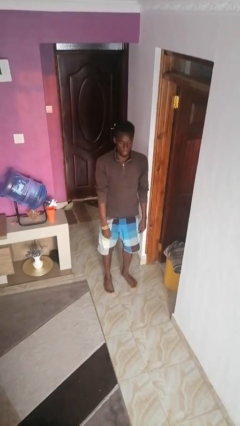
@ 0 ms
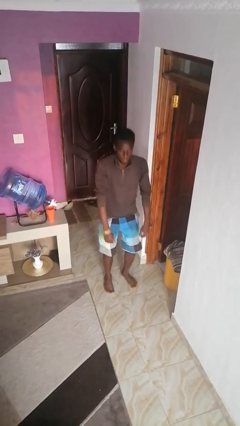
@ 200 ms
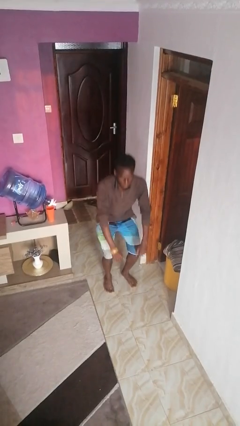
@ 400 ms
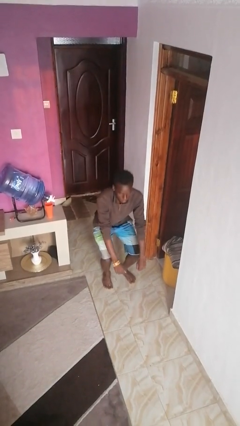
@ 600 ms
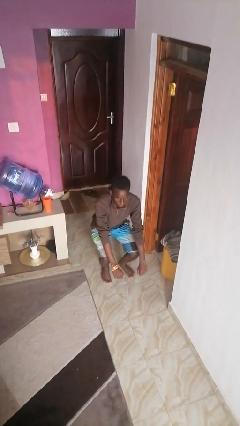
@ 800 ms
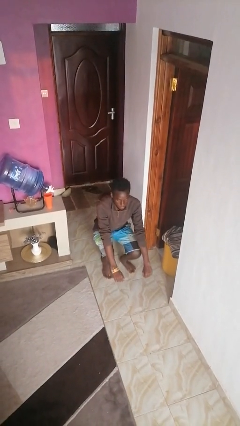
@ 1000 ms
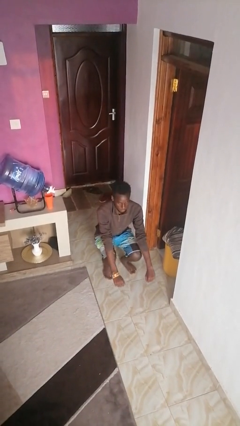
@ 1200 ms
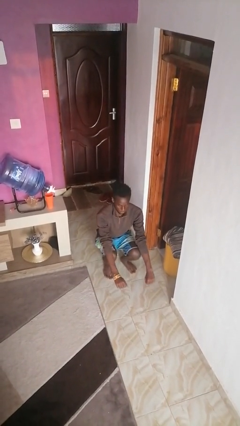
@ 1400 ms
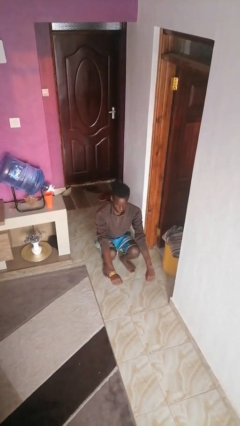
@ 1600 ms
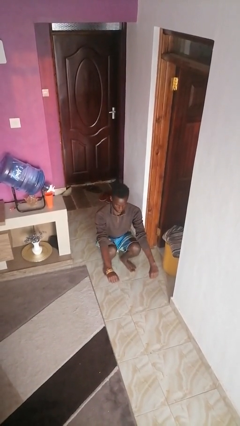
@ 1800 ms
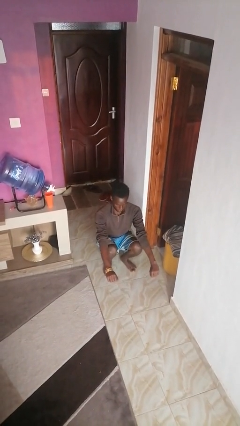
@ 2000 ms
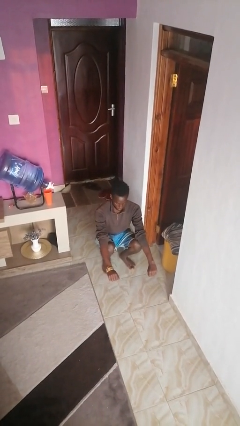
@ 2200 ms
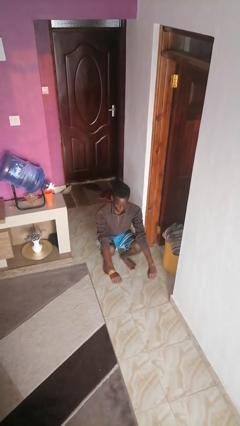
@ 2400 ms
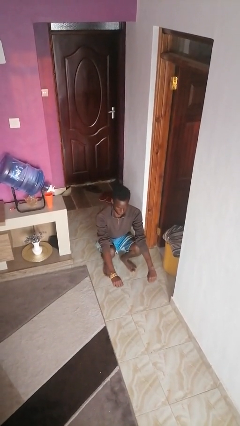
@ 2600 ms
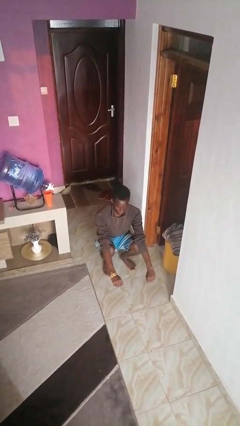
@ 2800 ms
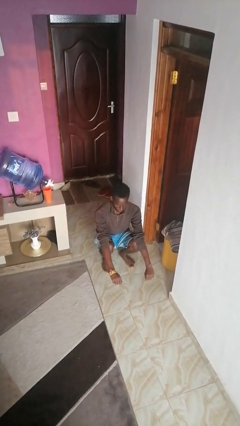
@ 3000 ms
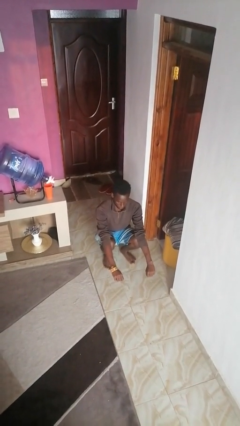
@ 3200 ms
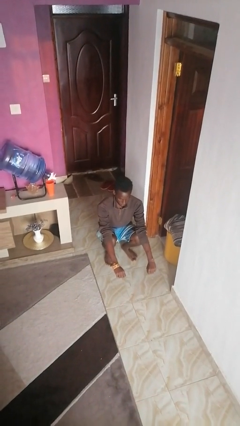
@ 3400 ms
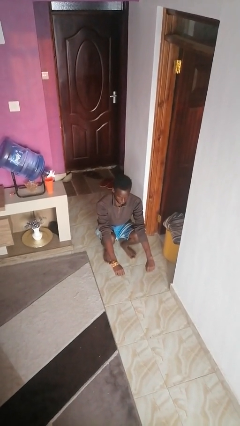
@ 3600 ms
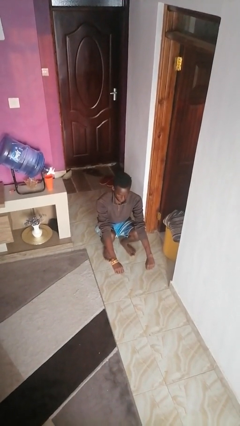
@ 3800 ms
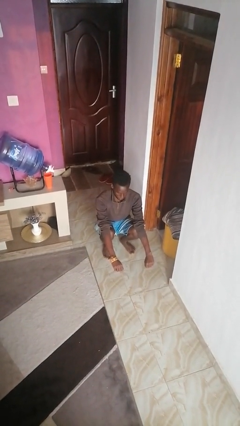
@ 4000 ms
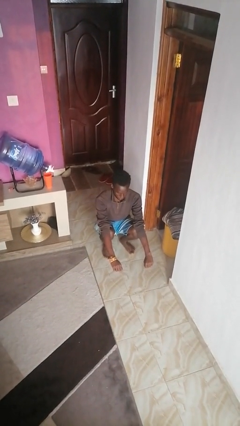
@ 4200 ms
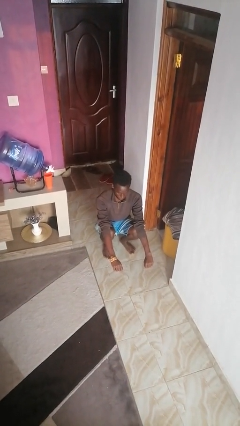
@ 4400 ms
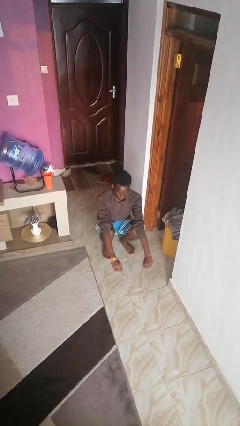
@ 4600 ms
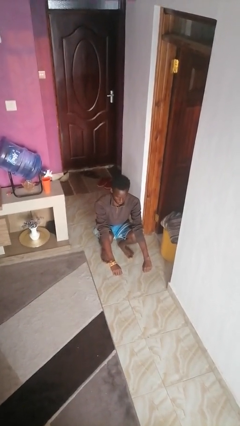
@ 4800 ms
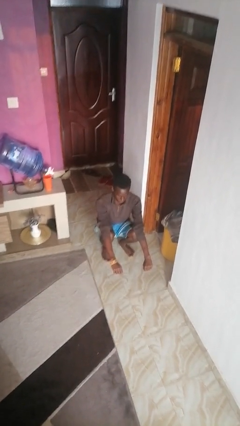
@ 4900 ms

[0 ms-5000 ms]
person squats

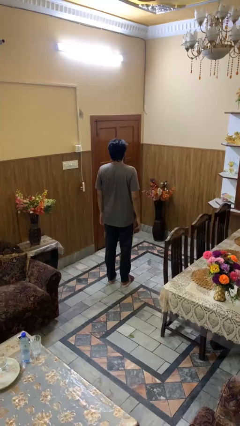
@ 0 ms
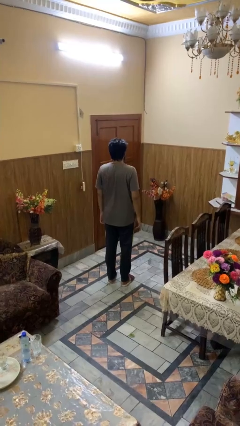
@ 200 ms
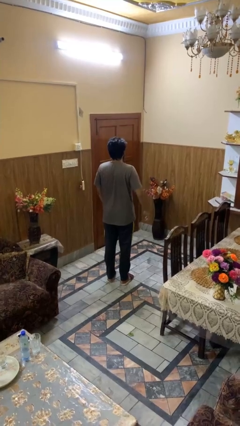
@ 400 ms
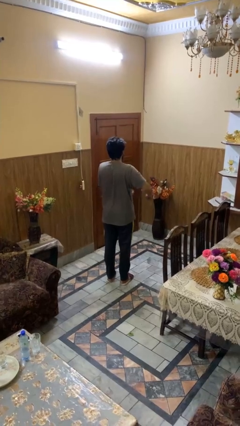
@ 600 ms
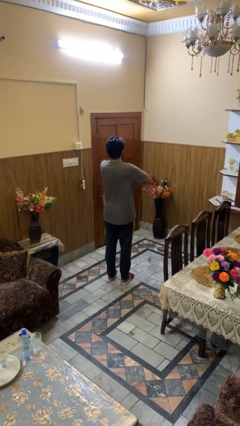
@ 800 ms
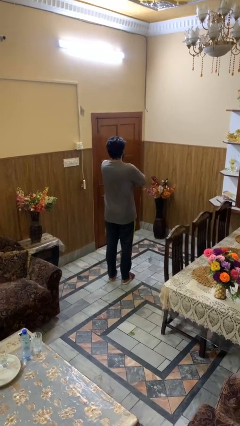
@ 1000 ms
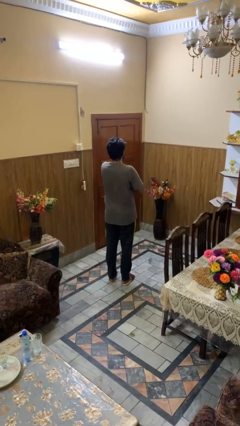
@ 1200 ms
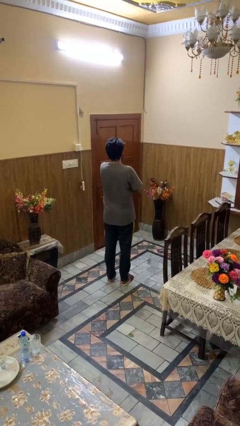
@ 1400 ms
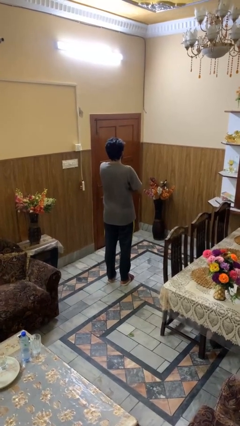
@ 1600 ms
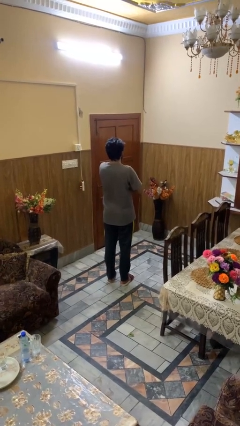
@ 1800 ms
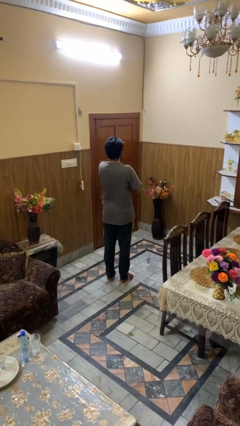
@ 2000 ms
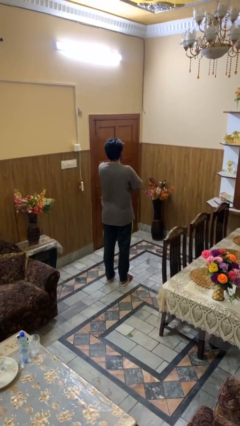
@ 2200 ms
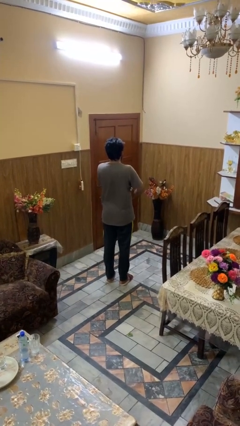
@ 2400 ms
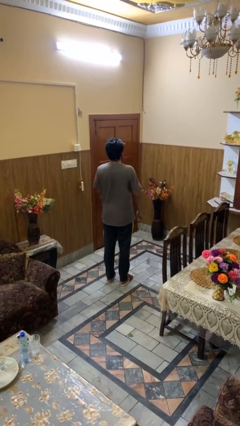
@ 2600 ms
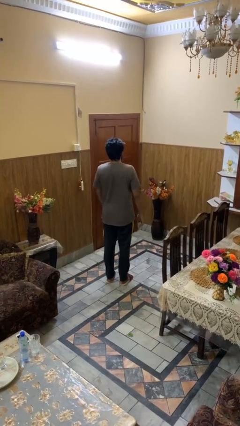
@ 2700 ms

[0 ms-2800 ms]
person crosses arms

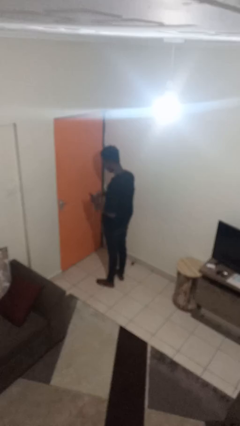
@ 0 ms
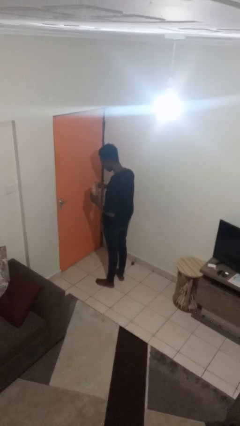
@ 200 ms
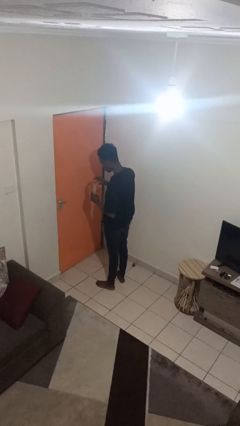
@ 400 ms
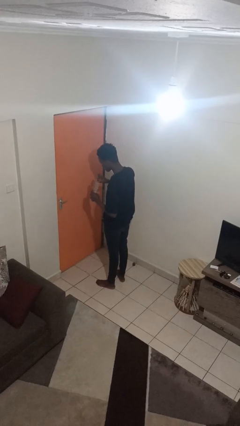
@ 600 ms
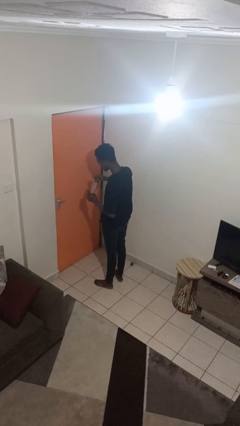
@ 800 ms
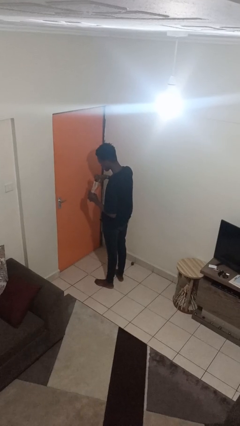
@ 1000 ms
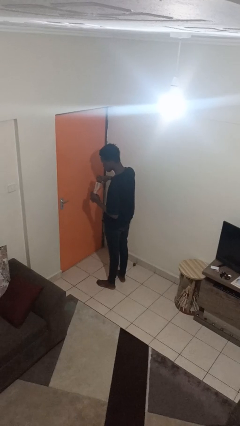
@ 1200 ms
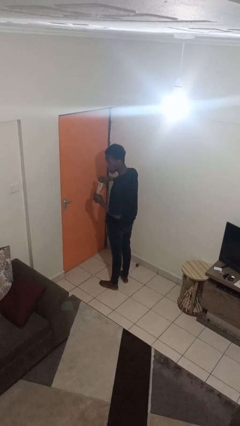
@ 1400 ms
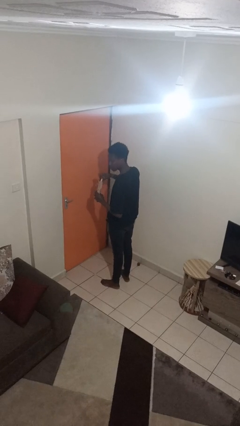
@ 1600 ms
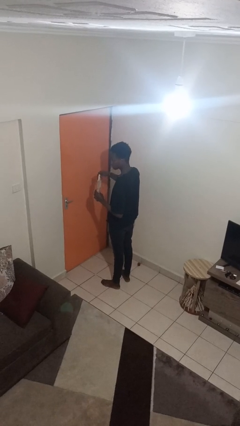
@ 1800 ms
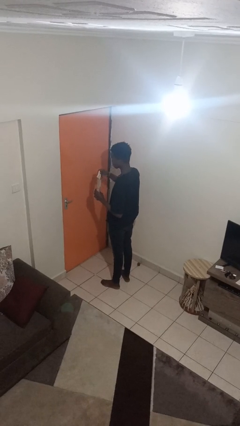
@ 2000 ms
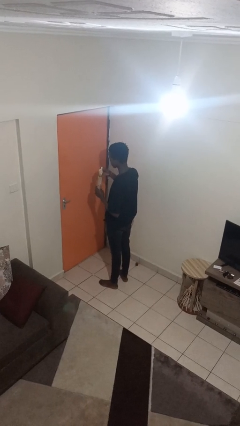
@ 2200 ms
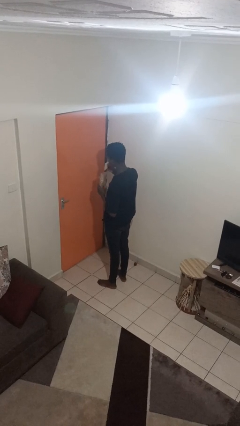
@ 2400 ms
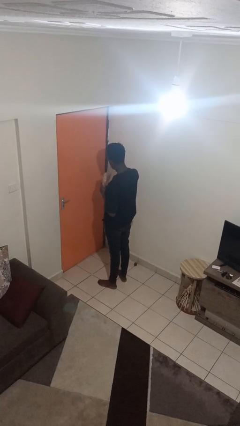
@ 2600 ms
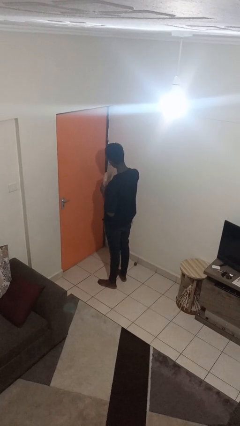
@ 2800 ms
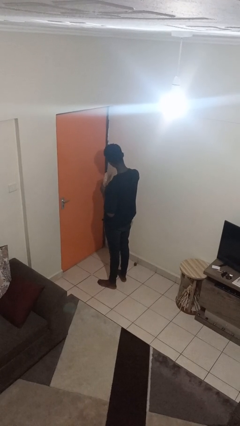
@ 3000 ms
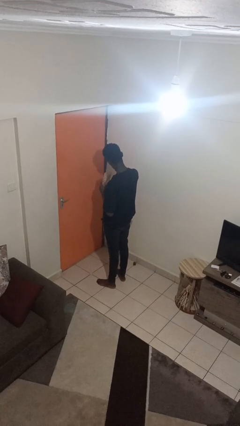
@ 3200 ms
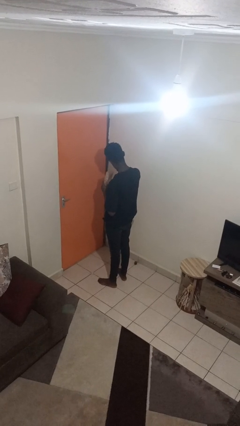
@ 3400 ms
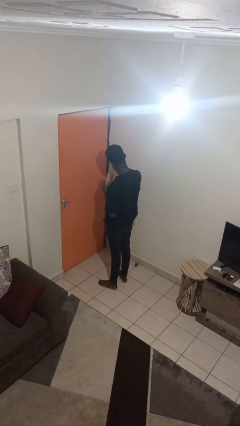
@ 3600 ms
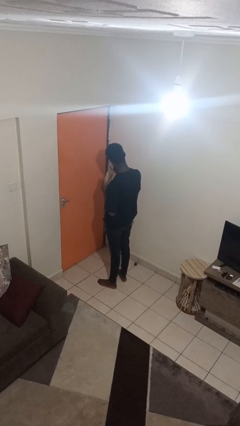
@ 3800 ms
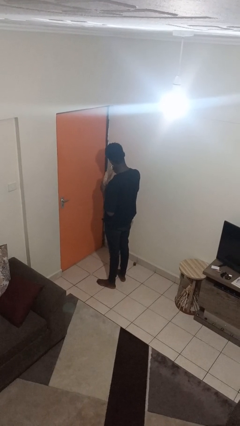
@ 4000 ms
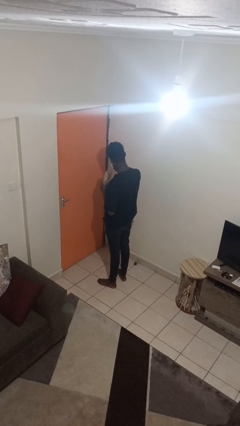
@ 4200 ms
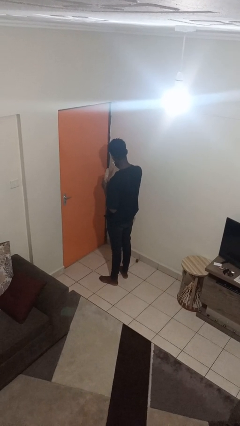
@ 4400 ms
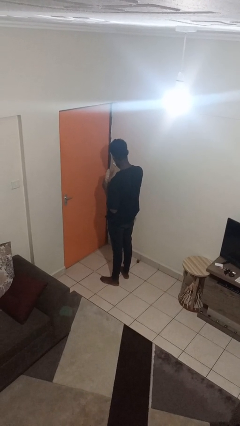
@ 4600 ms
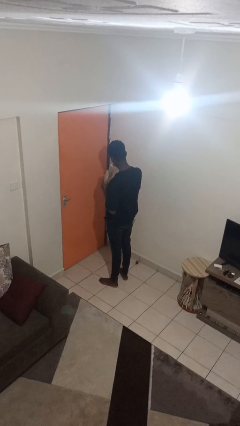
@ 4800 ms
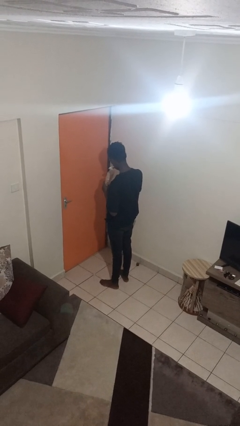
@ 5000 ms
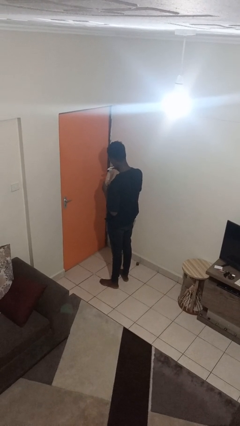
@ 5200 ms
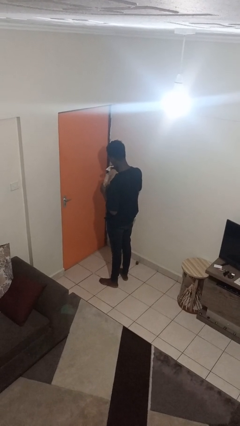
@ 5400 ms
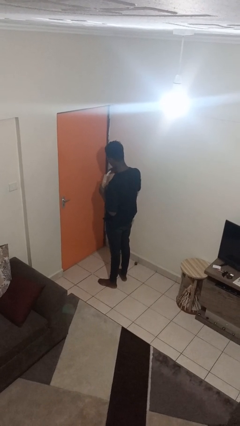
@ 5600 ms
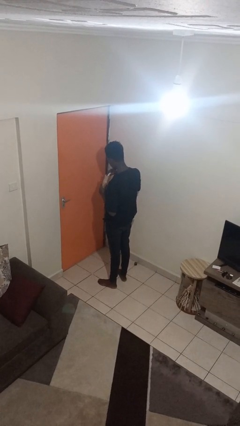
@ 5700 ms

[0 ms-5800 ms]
person eats snack from bag

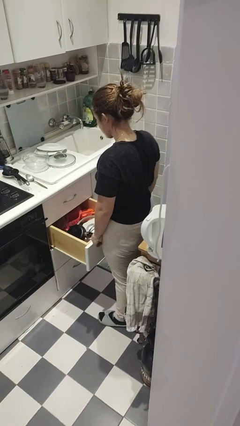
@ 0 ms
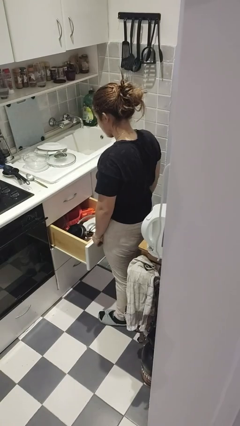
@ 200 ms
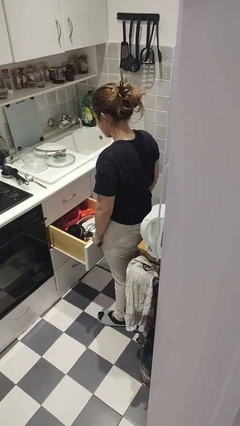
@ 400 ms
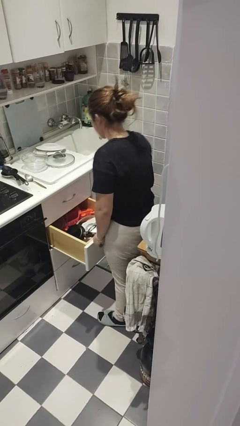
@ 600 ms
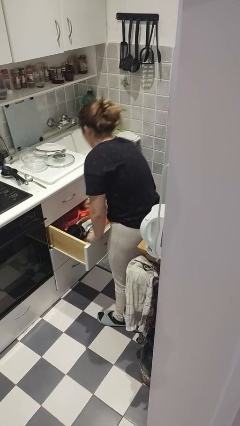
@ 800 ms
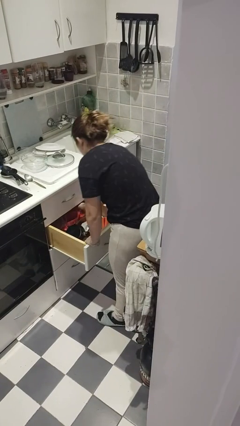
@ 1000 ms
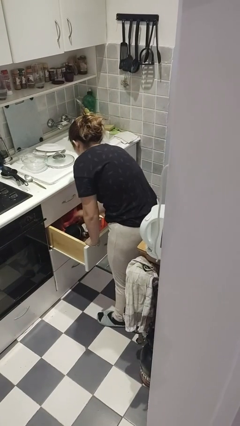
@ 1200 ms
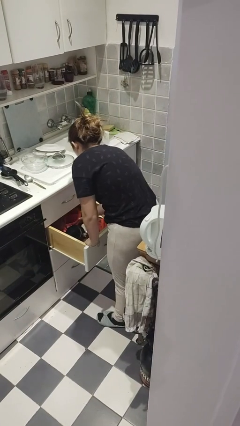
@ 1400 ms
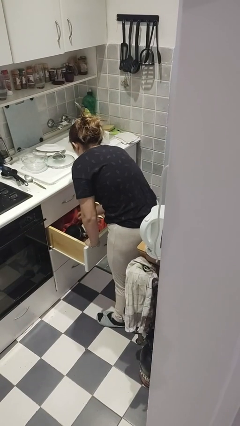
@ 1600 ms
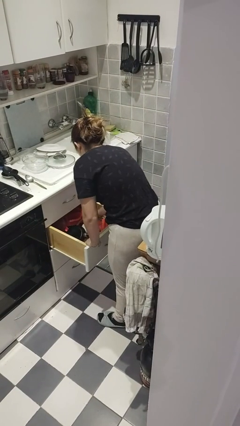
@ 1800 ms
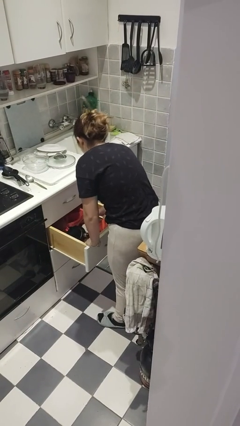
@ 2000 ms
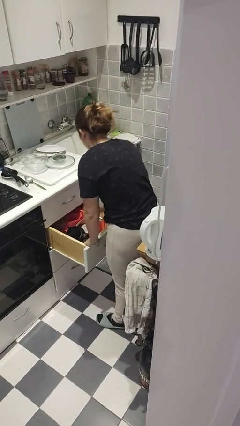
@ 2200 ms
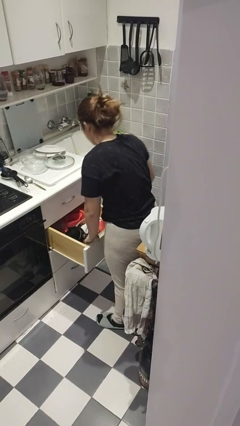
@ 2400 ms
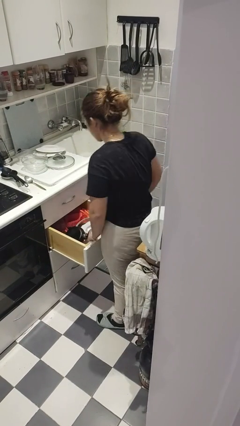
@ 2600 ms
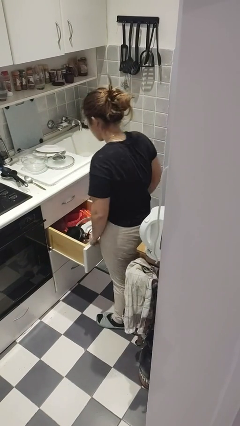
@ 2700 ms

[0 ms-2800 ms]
person searches in kitchen drawer

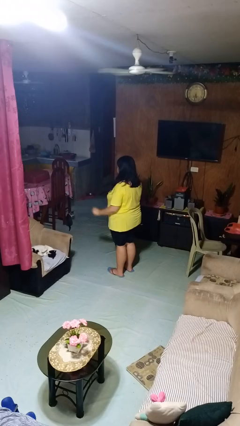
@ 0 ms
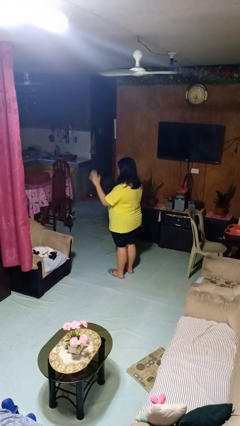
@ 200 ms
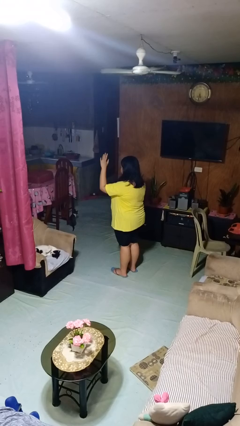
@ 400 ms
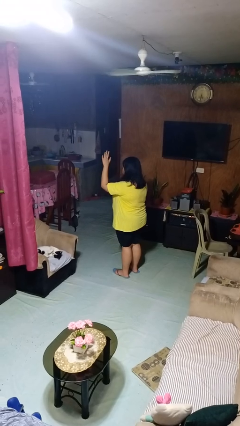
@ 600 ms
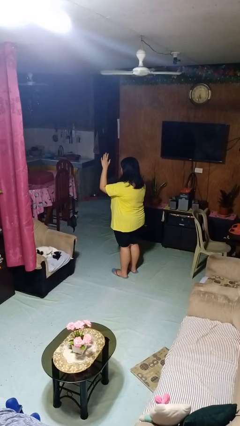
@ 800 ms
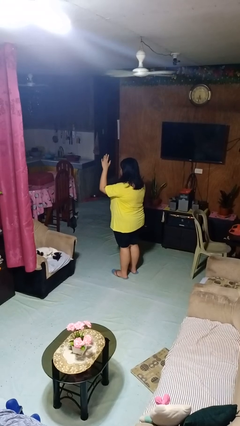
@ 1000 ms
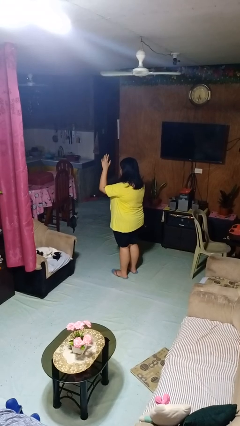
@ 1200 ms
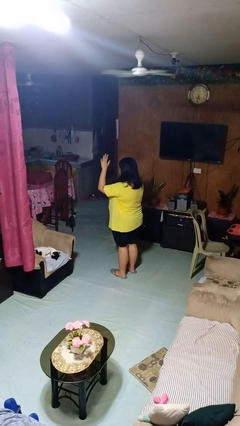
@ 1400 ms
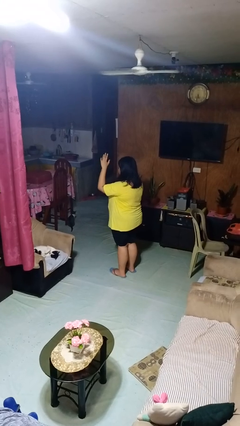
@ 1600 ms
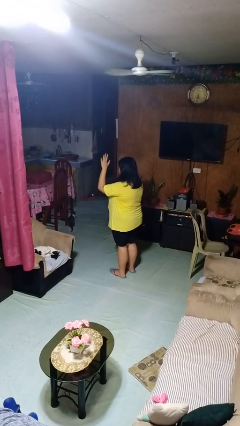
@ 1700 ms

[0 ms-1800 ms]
person gestures raise hand
